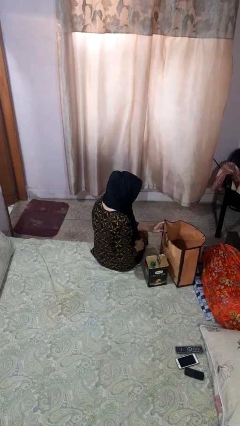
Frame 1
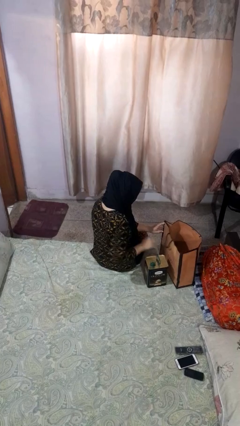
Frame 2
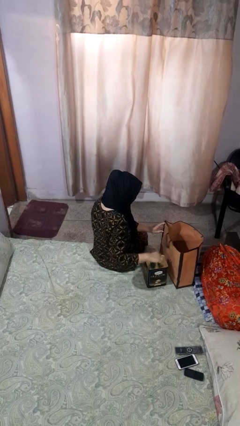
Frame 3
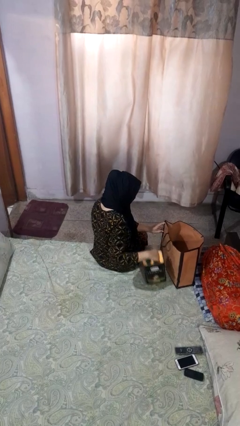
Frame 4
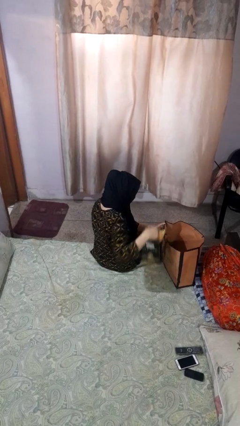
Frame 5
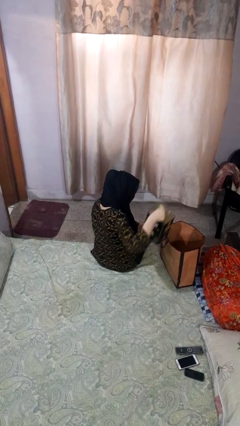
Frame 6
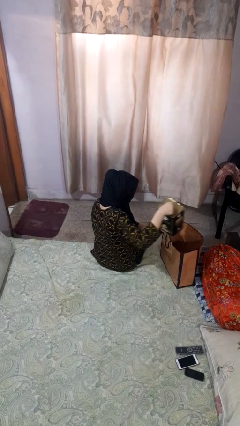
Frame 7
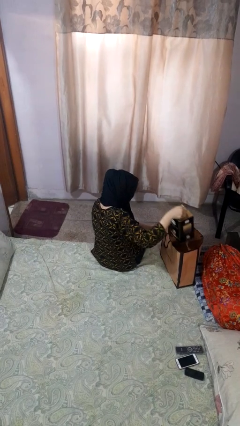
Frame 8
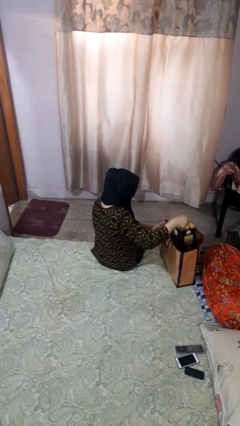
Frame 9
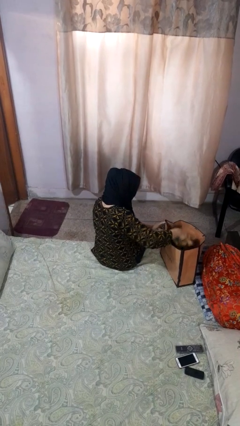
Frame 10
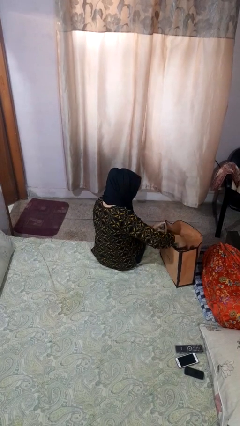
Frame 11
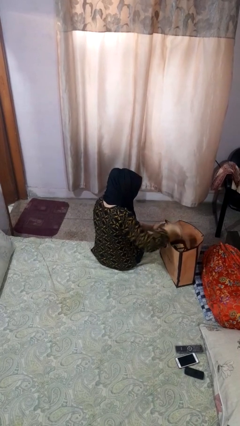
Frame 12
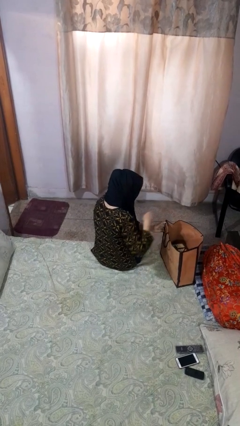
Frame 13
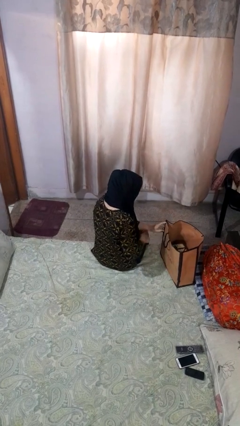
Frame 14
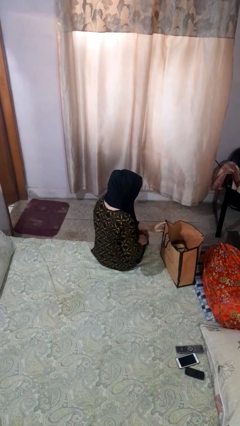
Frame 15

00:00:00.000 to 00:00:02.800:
person puts object into bag

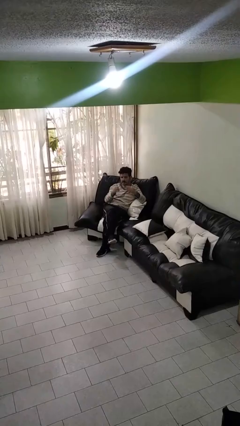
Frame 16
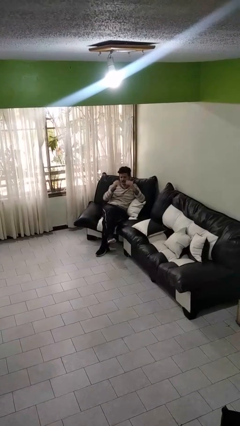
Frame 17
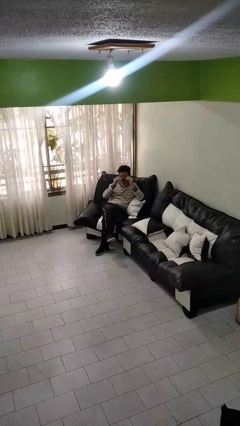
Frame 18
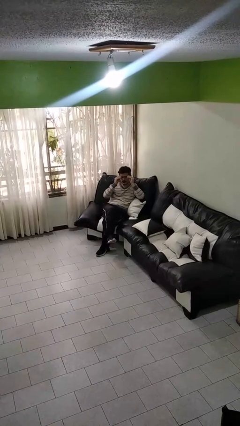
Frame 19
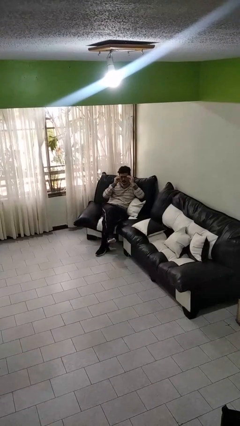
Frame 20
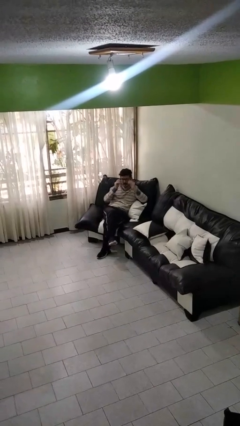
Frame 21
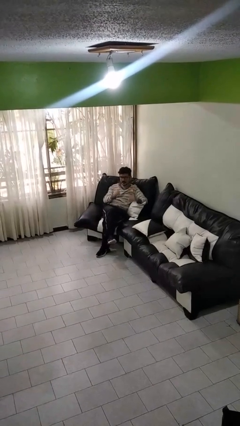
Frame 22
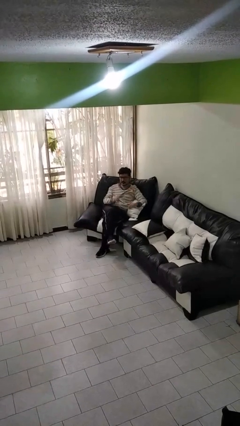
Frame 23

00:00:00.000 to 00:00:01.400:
person puts on glasses

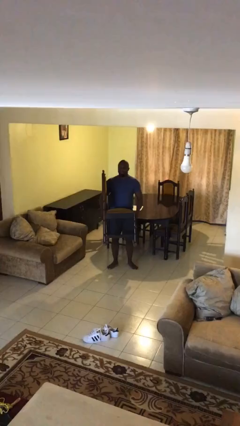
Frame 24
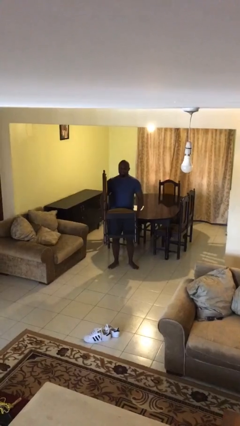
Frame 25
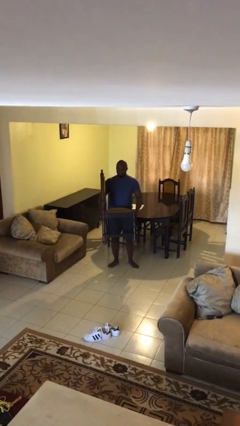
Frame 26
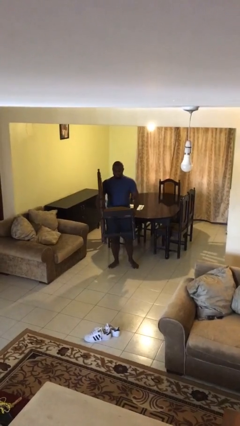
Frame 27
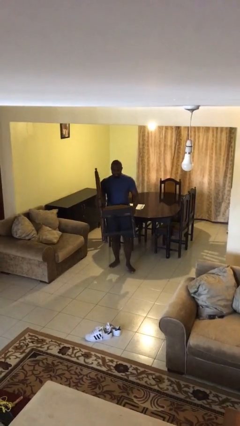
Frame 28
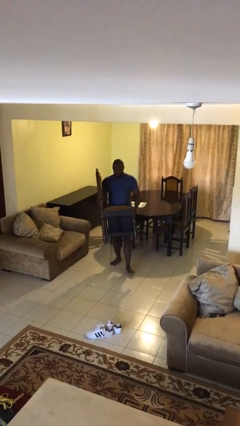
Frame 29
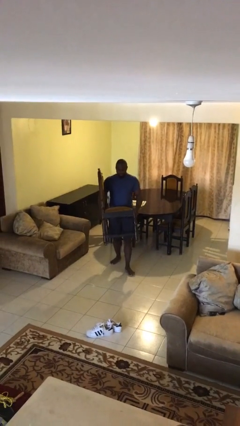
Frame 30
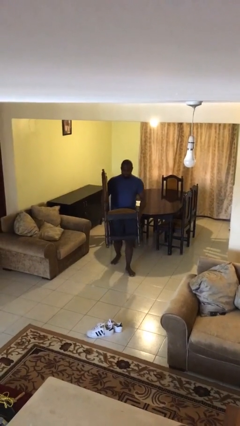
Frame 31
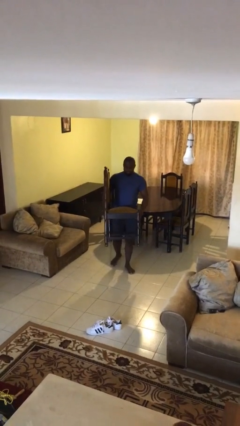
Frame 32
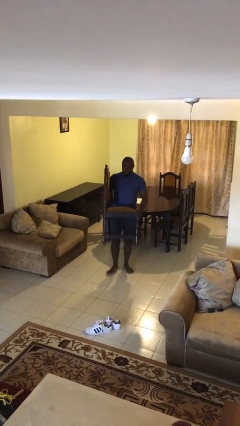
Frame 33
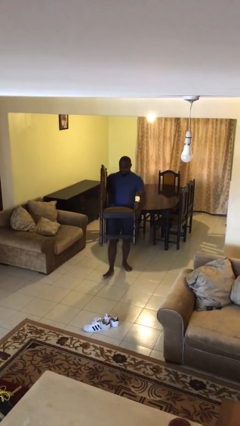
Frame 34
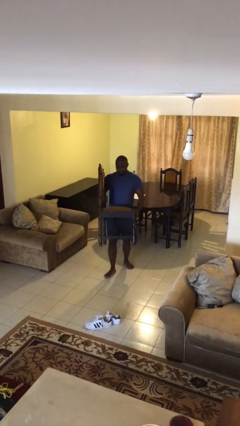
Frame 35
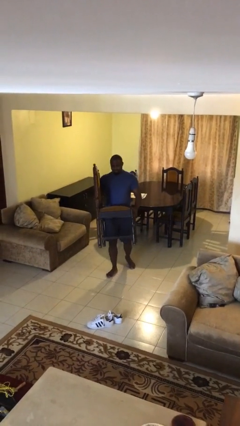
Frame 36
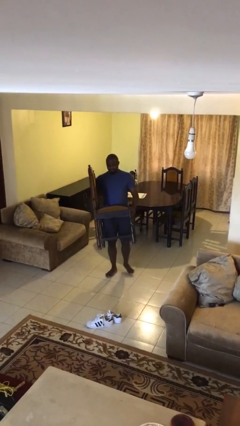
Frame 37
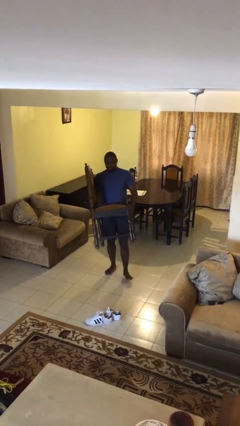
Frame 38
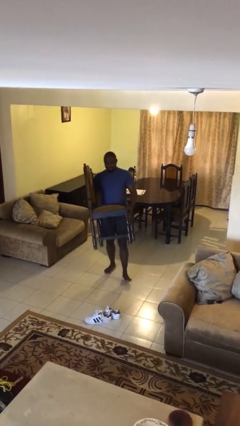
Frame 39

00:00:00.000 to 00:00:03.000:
person carries heavy object

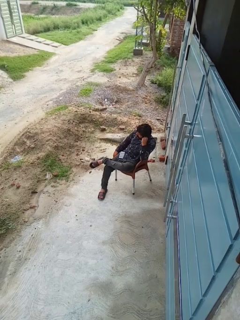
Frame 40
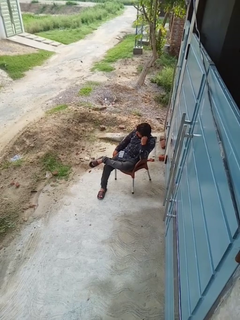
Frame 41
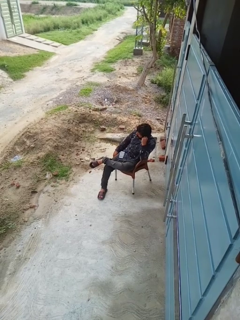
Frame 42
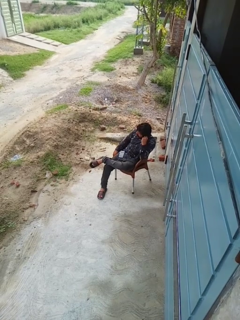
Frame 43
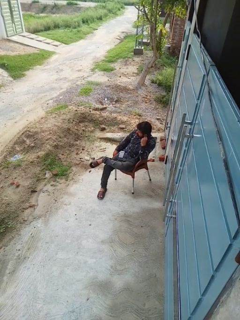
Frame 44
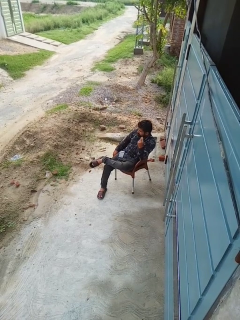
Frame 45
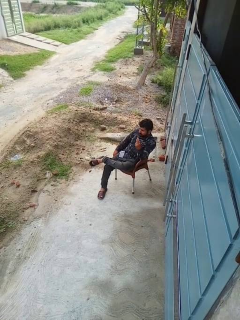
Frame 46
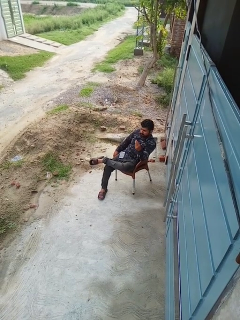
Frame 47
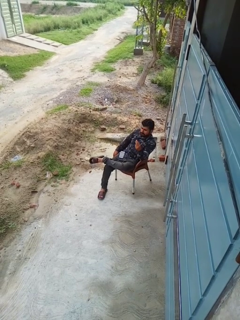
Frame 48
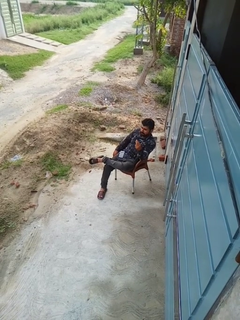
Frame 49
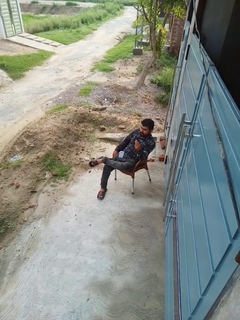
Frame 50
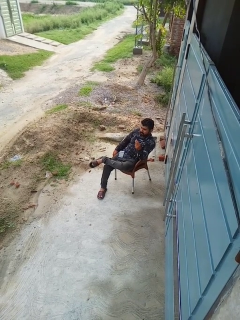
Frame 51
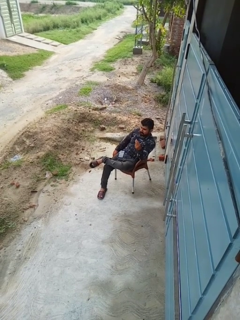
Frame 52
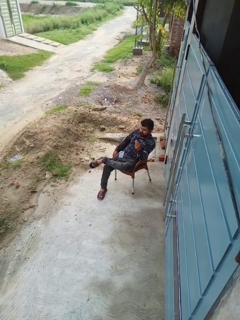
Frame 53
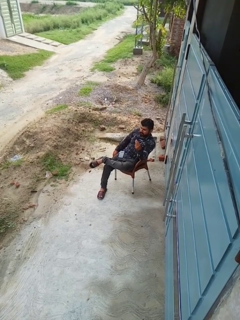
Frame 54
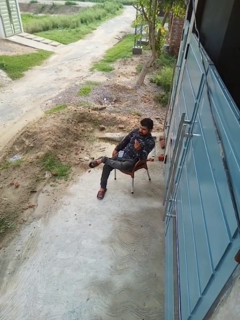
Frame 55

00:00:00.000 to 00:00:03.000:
person takes off headphones

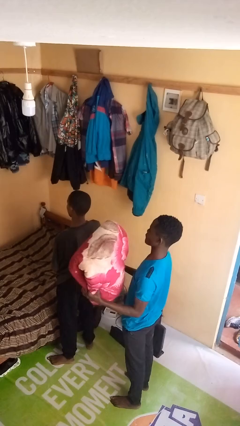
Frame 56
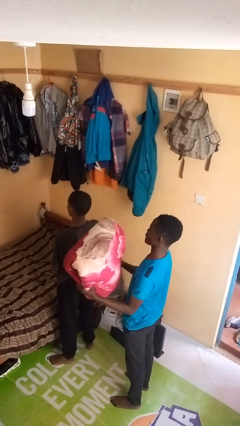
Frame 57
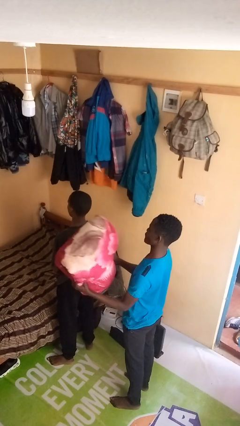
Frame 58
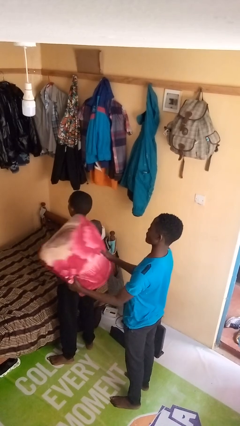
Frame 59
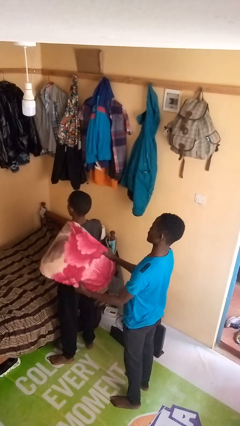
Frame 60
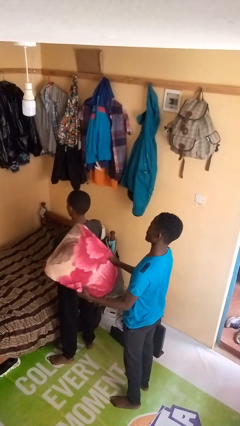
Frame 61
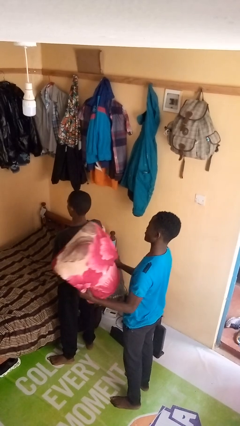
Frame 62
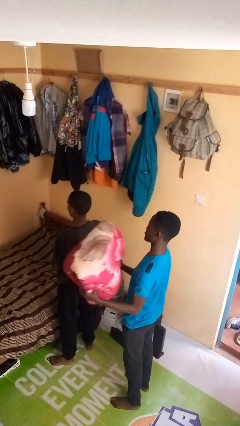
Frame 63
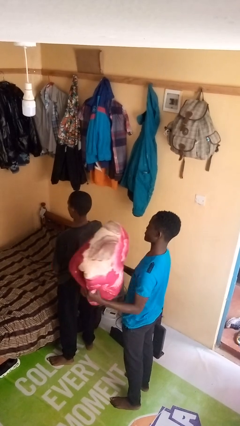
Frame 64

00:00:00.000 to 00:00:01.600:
person hits person with pillow

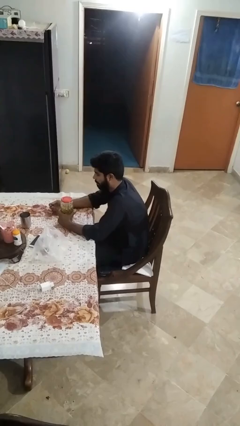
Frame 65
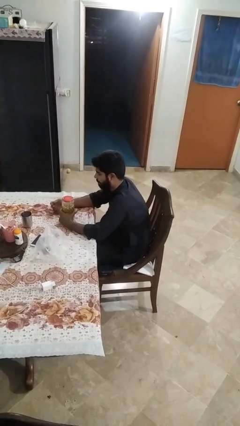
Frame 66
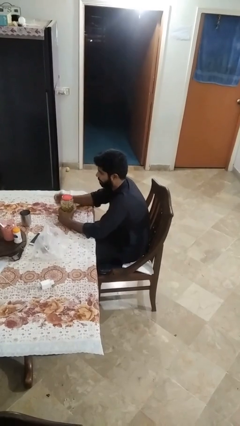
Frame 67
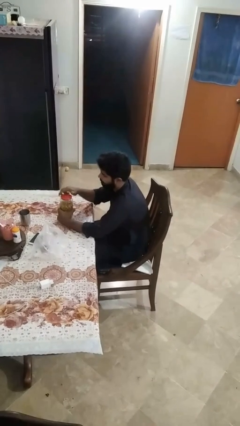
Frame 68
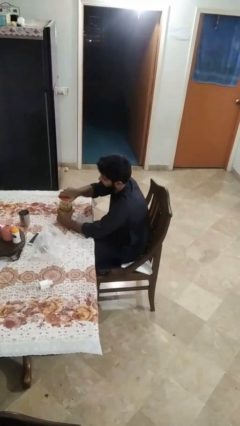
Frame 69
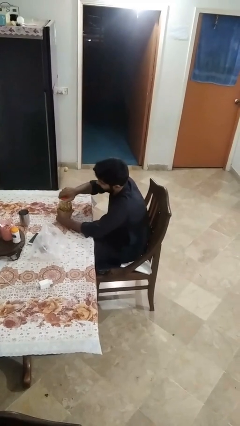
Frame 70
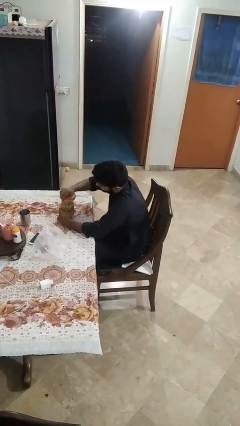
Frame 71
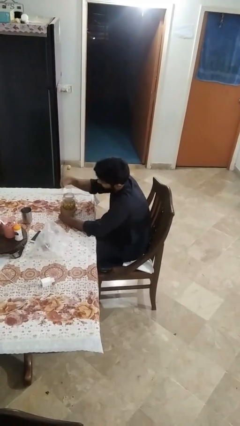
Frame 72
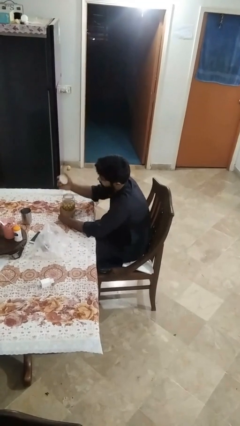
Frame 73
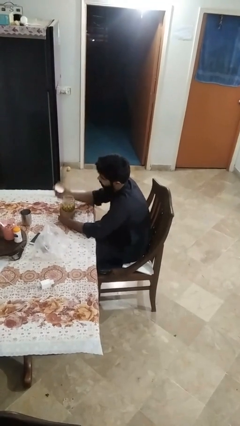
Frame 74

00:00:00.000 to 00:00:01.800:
person opens jar

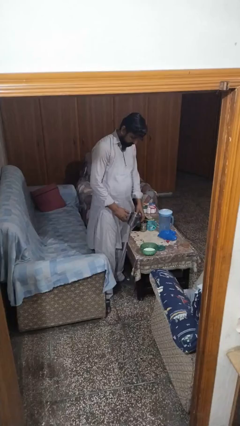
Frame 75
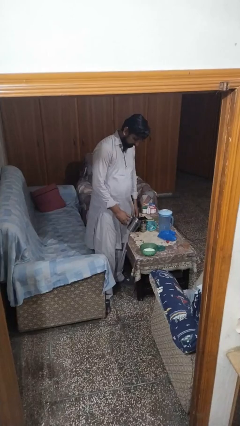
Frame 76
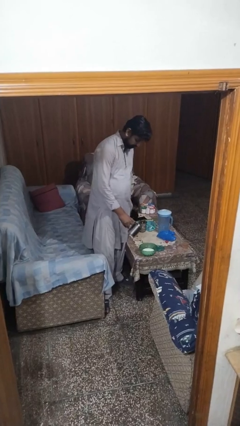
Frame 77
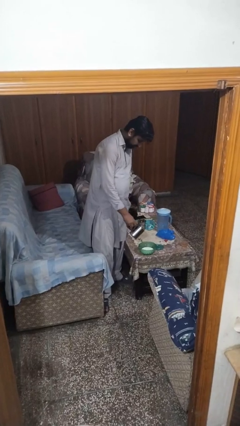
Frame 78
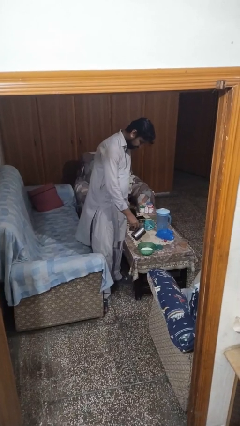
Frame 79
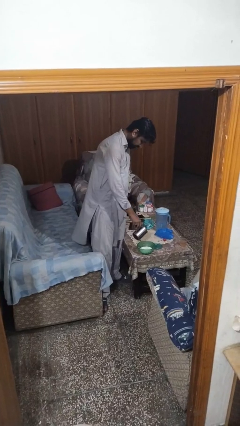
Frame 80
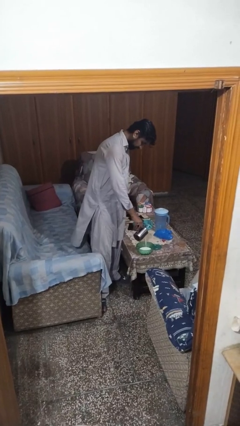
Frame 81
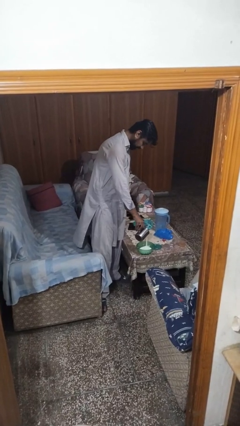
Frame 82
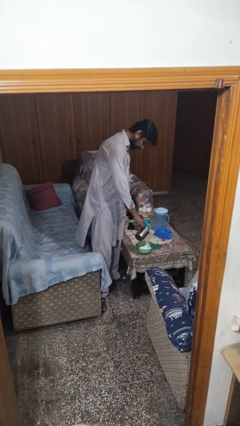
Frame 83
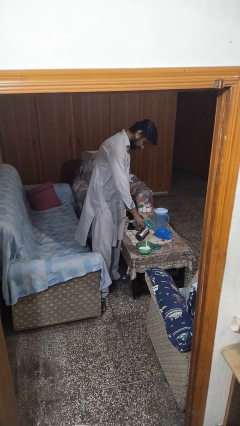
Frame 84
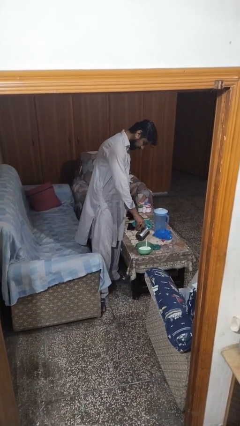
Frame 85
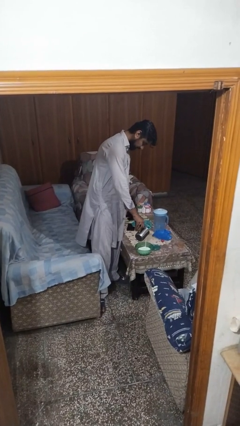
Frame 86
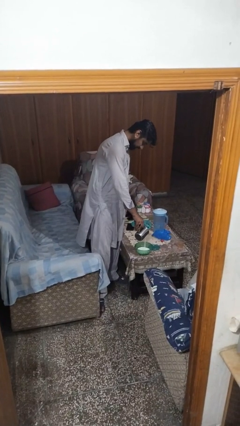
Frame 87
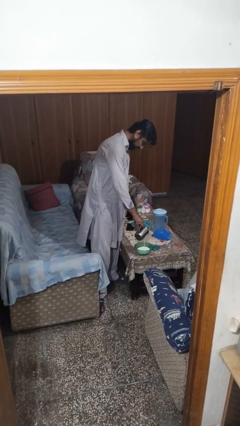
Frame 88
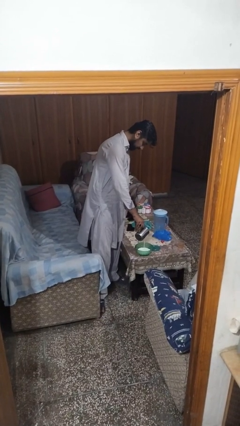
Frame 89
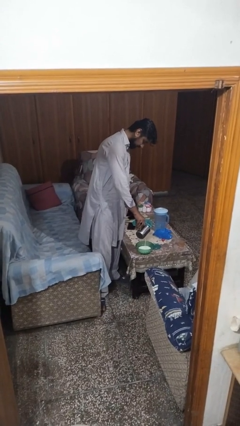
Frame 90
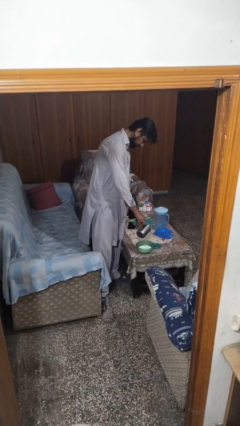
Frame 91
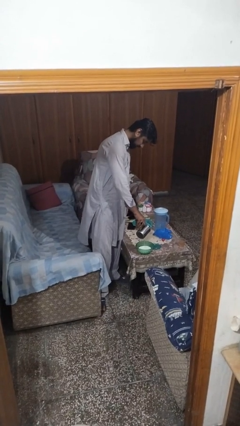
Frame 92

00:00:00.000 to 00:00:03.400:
person pours into bowl

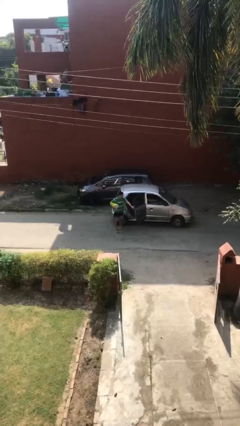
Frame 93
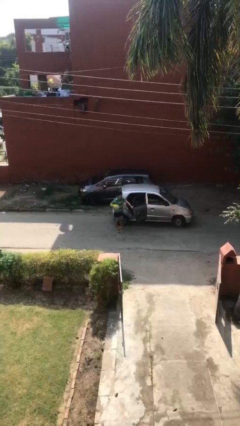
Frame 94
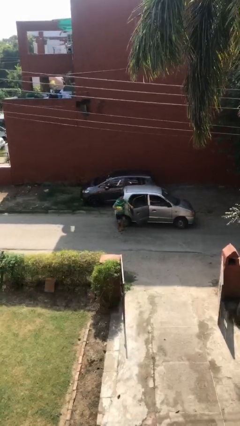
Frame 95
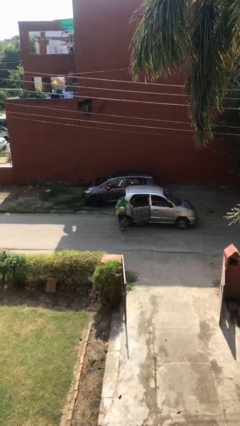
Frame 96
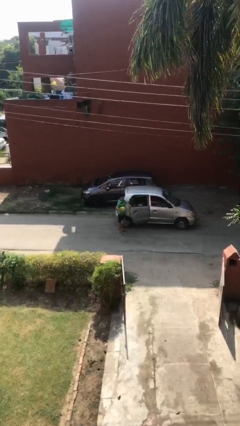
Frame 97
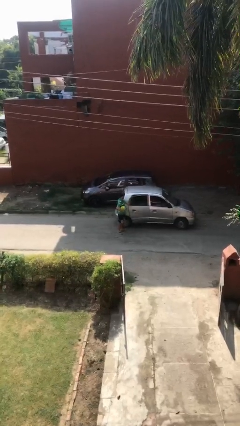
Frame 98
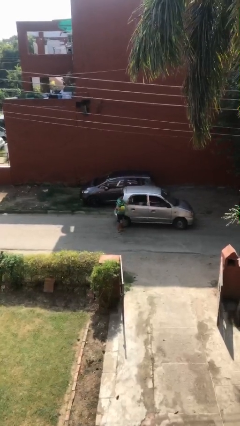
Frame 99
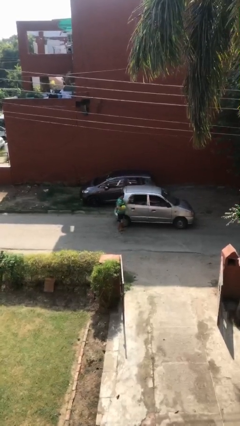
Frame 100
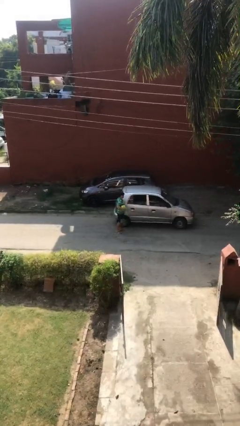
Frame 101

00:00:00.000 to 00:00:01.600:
person closes car door
